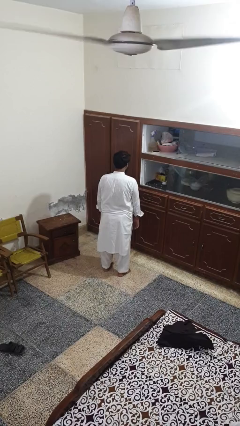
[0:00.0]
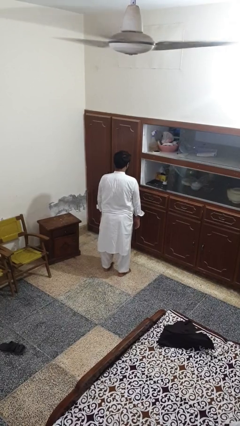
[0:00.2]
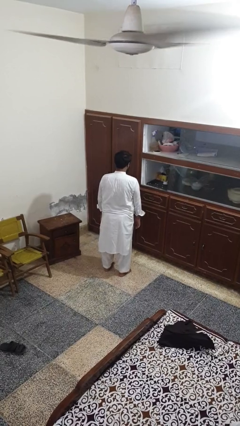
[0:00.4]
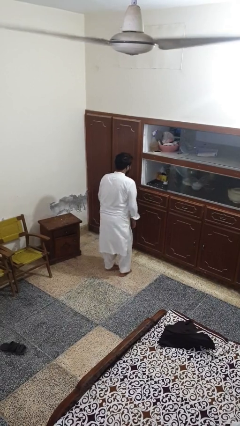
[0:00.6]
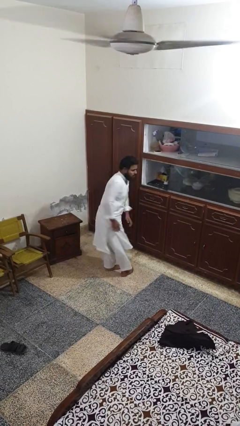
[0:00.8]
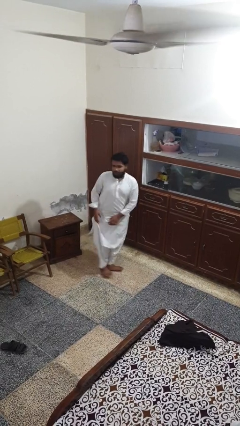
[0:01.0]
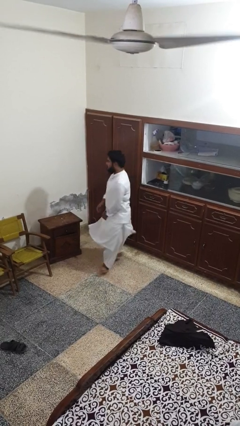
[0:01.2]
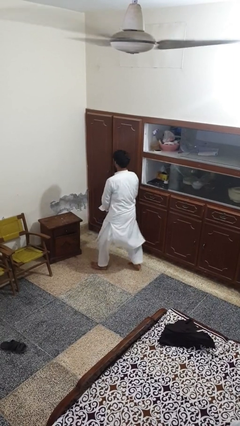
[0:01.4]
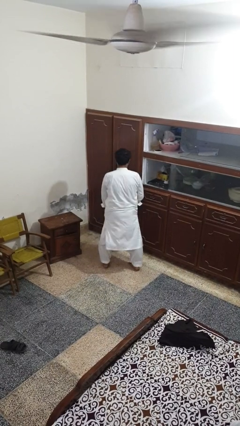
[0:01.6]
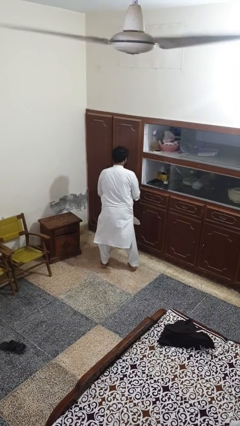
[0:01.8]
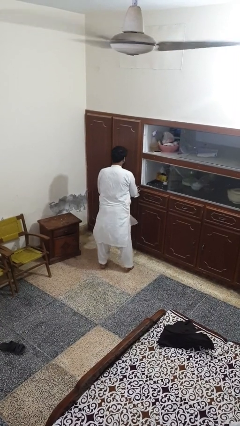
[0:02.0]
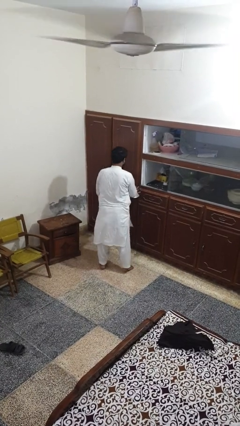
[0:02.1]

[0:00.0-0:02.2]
person twirls

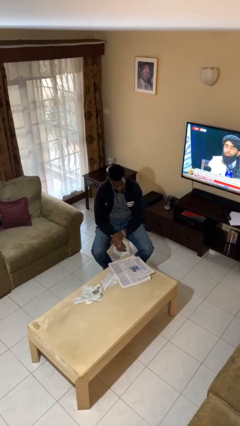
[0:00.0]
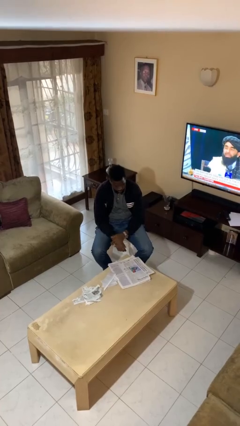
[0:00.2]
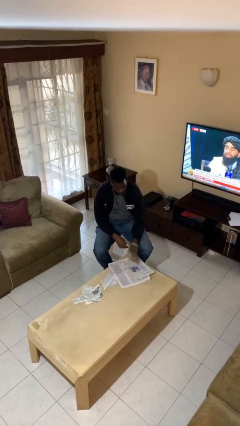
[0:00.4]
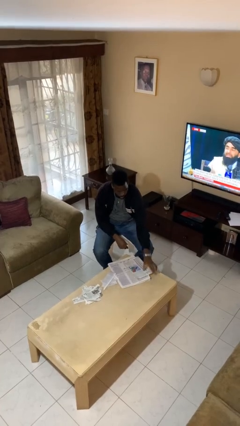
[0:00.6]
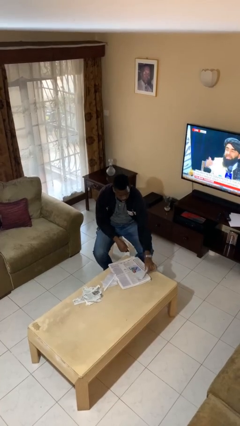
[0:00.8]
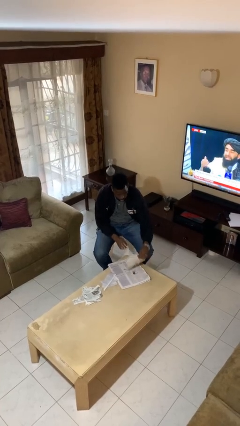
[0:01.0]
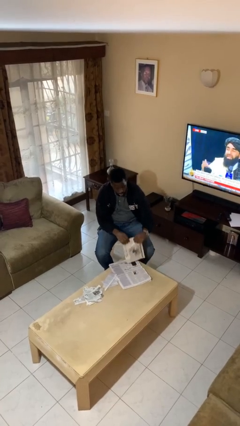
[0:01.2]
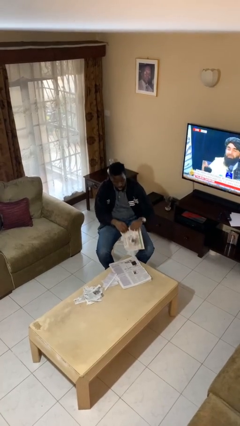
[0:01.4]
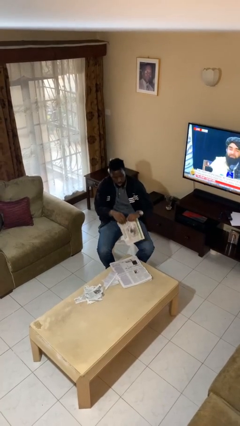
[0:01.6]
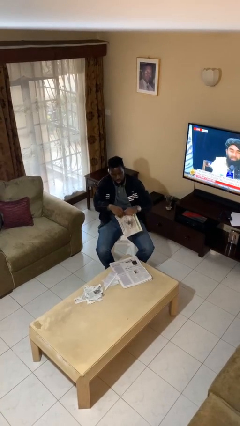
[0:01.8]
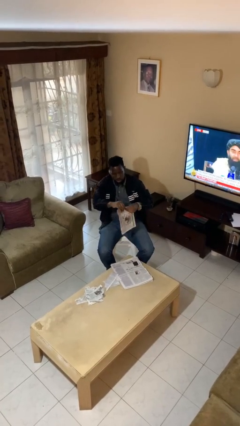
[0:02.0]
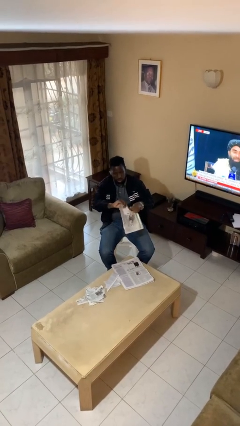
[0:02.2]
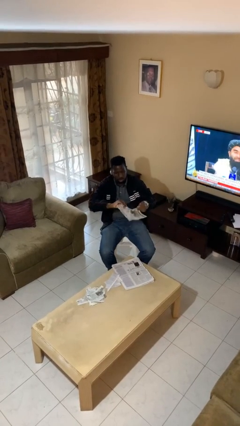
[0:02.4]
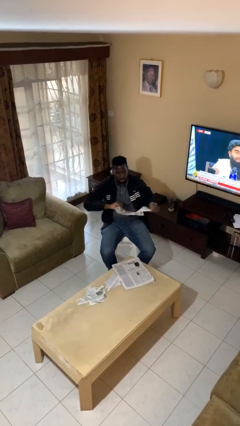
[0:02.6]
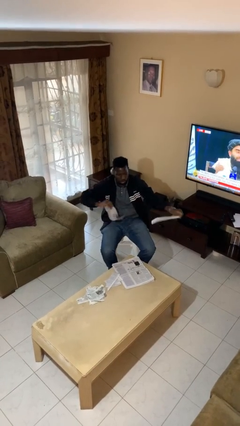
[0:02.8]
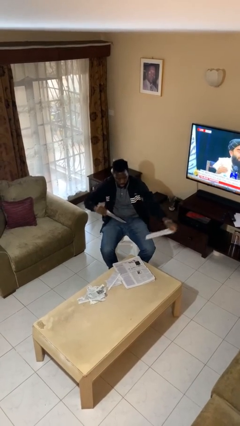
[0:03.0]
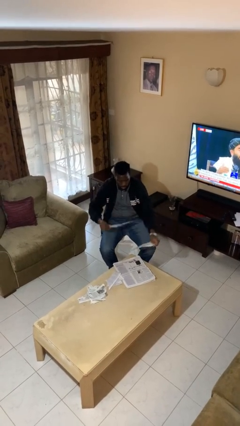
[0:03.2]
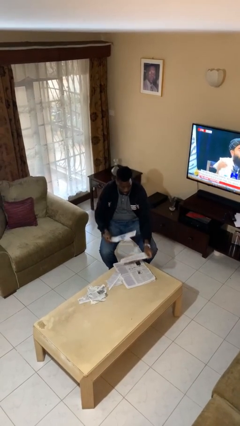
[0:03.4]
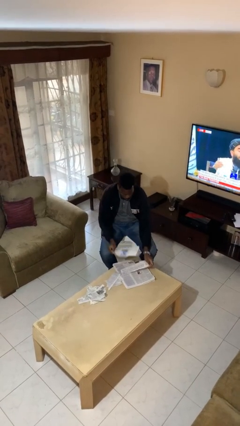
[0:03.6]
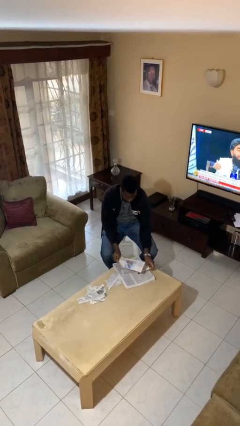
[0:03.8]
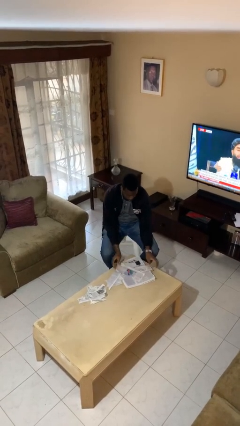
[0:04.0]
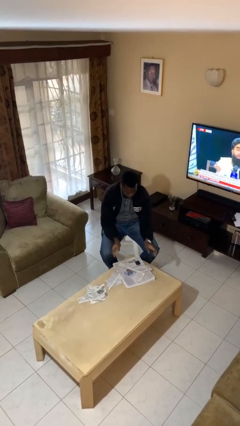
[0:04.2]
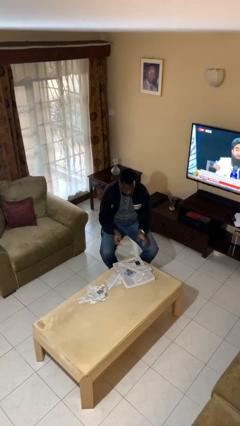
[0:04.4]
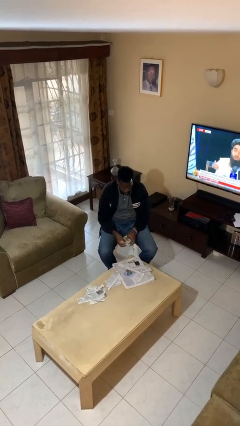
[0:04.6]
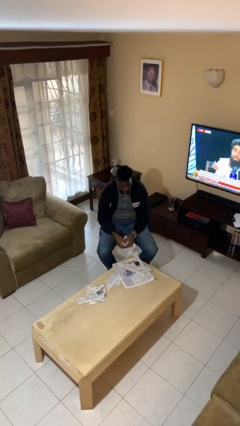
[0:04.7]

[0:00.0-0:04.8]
person tears paper

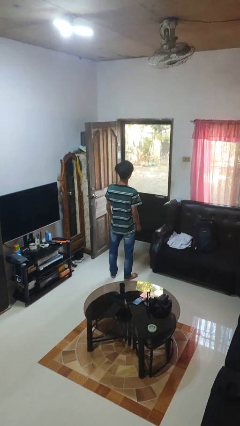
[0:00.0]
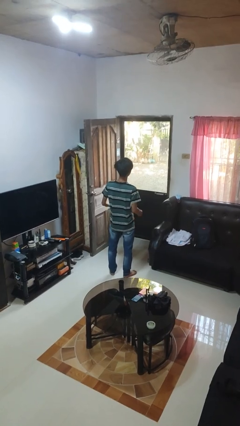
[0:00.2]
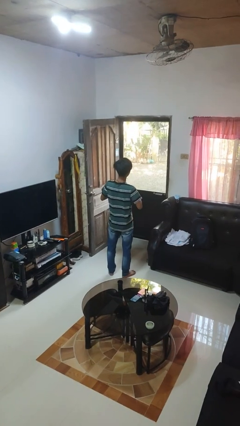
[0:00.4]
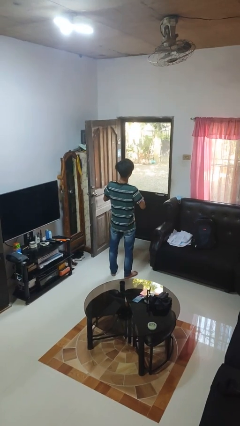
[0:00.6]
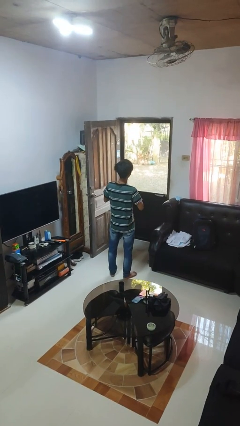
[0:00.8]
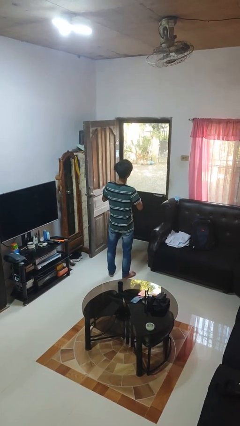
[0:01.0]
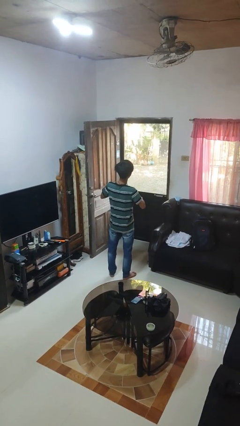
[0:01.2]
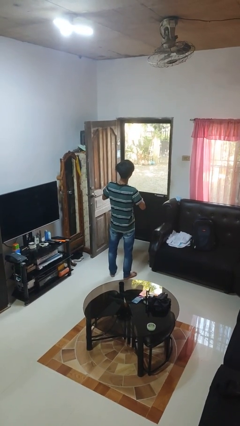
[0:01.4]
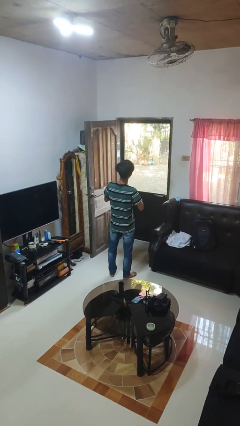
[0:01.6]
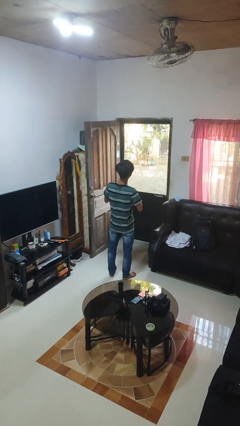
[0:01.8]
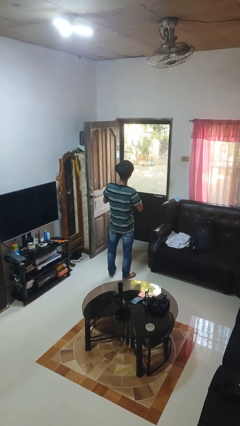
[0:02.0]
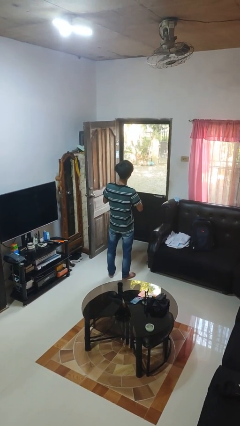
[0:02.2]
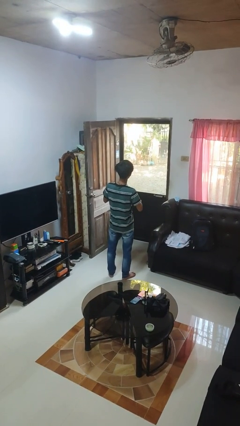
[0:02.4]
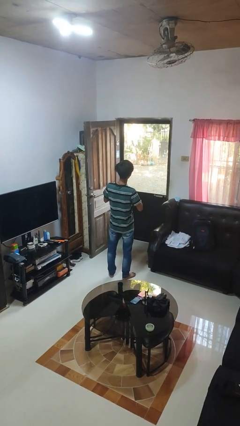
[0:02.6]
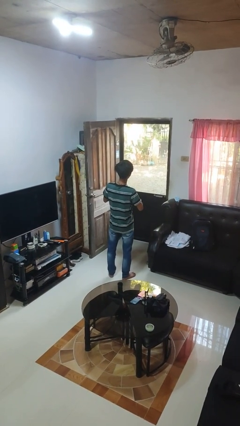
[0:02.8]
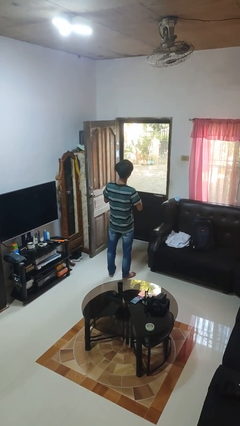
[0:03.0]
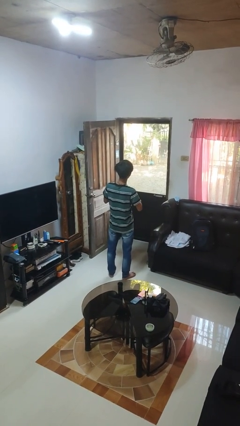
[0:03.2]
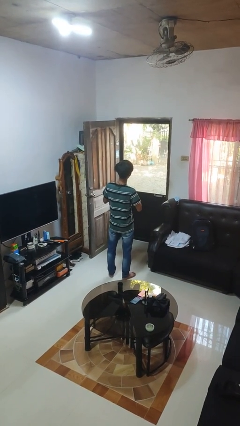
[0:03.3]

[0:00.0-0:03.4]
person unbuttons shirt

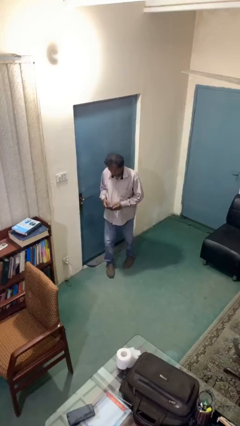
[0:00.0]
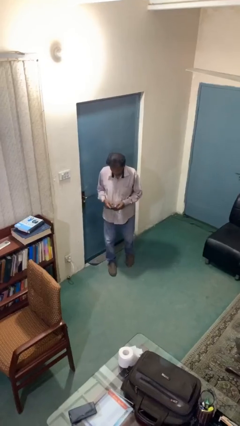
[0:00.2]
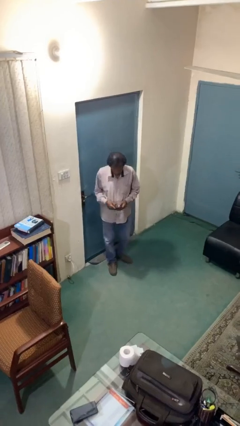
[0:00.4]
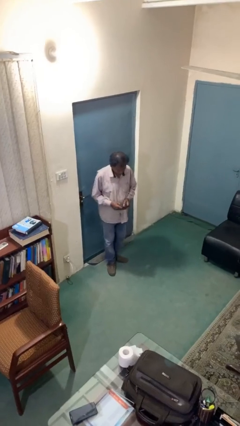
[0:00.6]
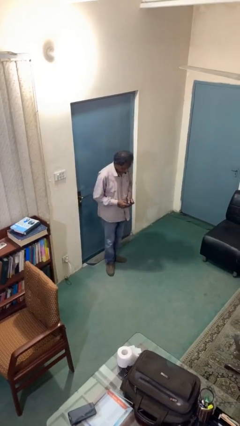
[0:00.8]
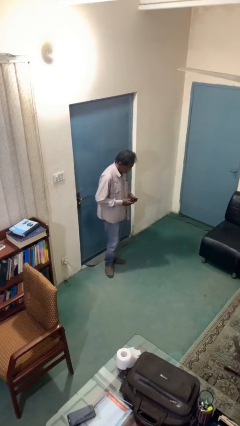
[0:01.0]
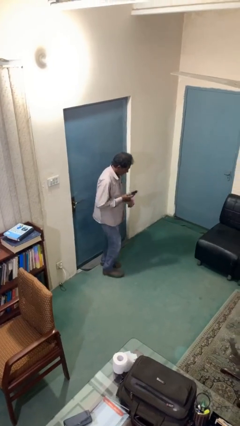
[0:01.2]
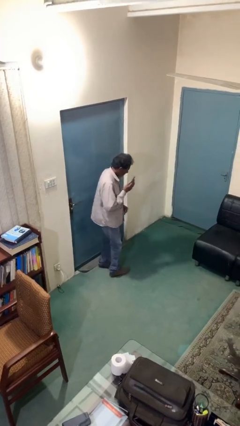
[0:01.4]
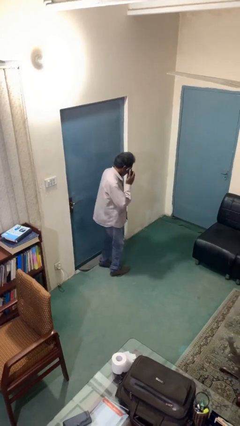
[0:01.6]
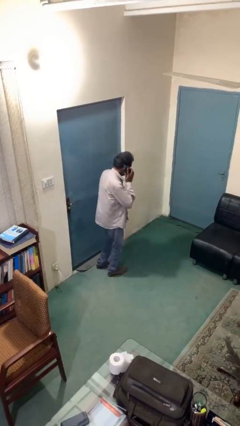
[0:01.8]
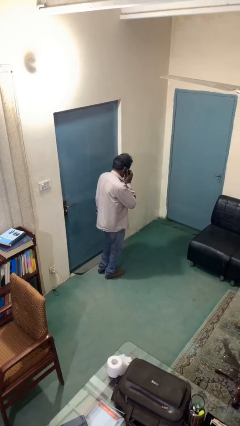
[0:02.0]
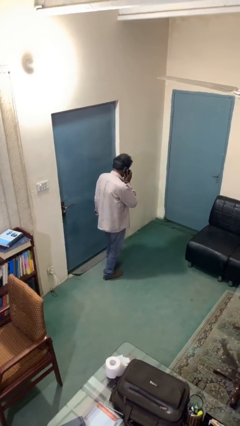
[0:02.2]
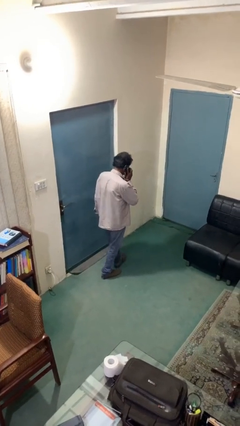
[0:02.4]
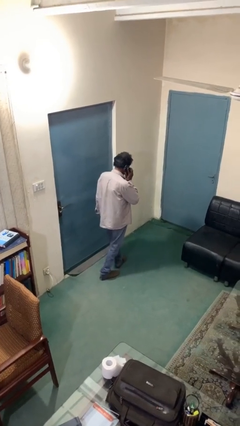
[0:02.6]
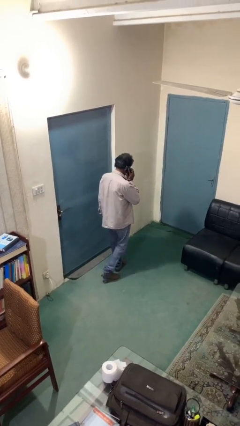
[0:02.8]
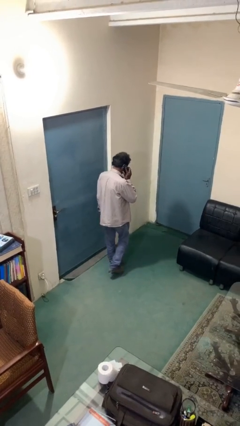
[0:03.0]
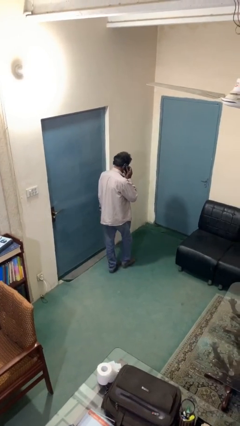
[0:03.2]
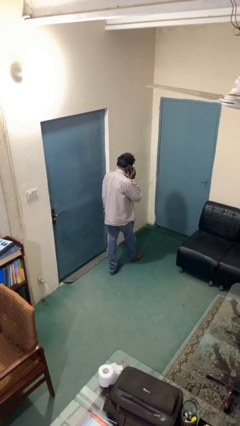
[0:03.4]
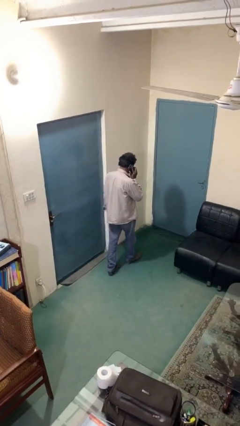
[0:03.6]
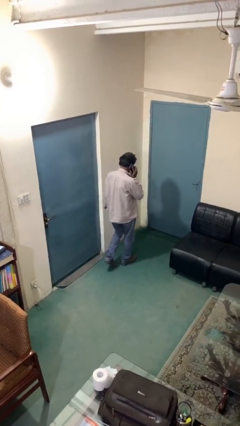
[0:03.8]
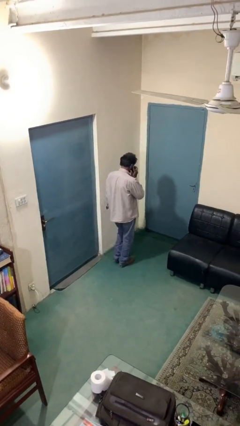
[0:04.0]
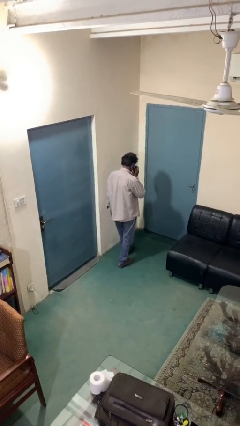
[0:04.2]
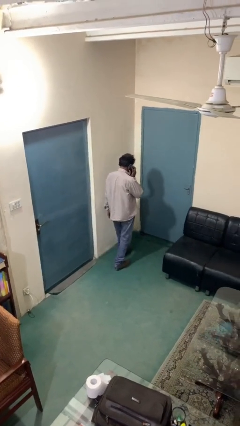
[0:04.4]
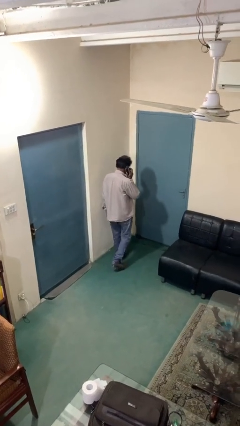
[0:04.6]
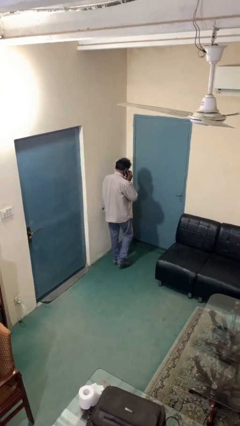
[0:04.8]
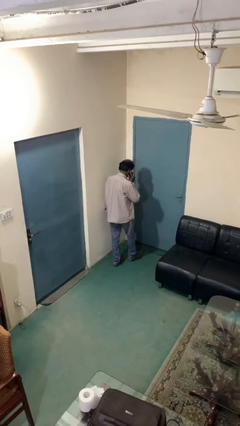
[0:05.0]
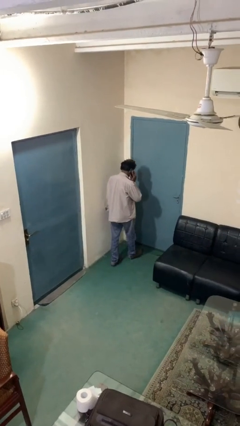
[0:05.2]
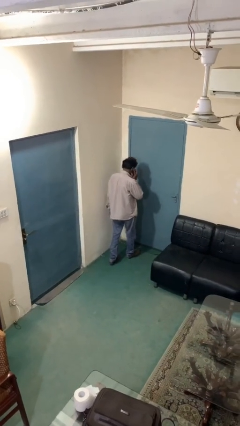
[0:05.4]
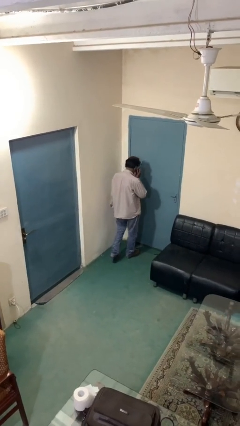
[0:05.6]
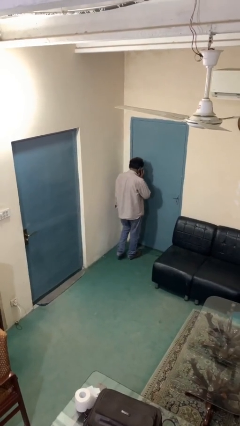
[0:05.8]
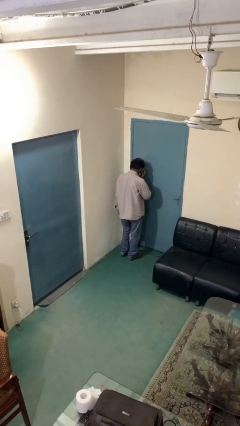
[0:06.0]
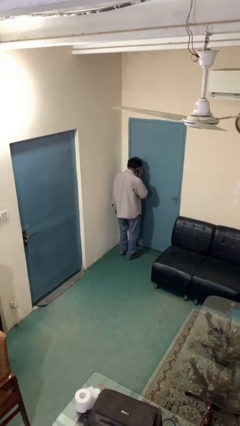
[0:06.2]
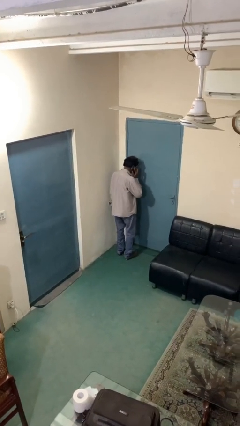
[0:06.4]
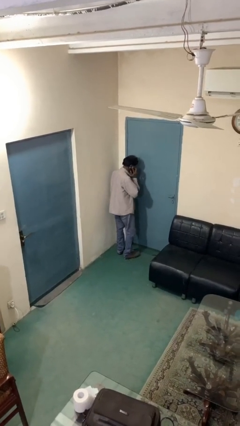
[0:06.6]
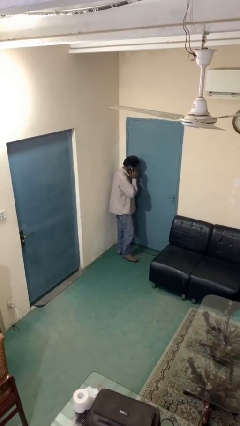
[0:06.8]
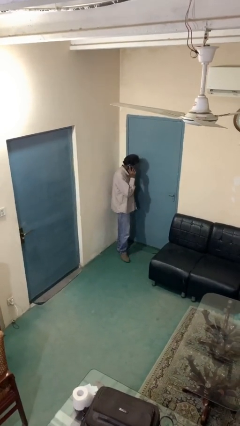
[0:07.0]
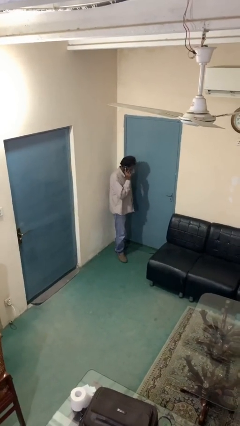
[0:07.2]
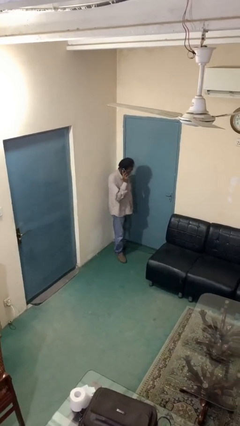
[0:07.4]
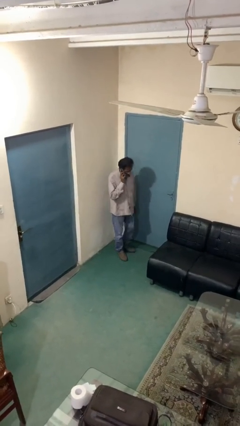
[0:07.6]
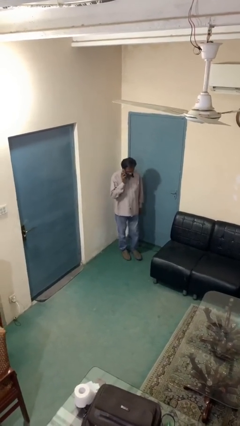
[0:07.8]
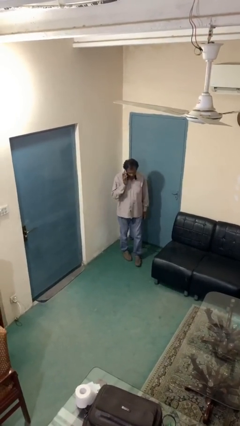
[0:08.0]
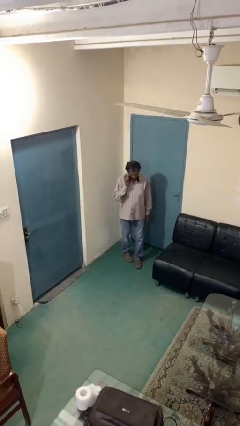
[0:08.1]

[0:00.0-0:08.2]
person talks on phone
